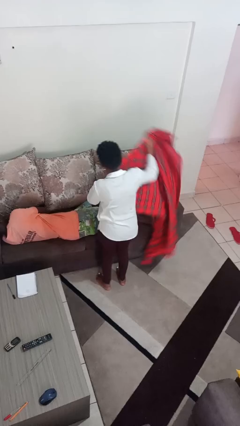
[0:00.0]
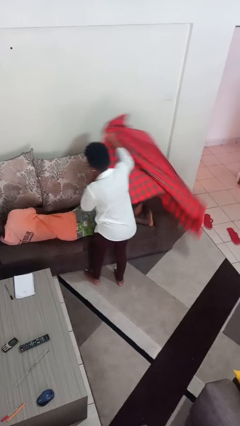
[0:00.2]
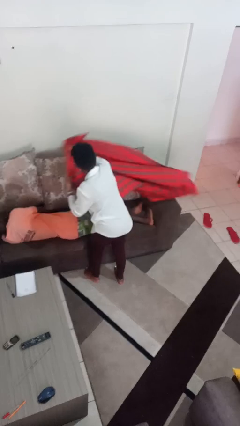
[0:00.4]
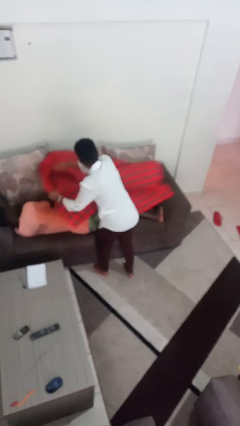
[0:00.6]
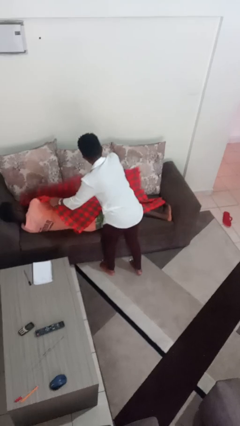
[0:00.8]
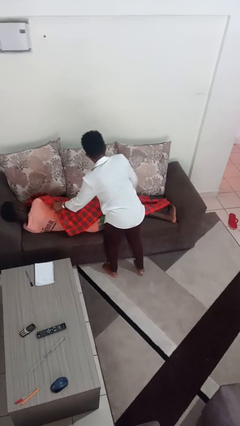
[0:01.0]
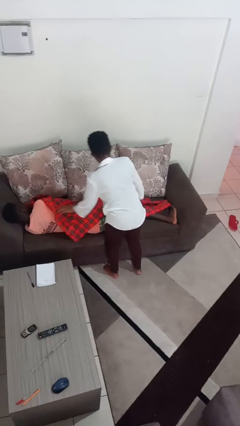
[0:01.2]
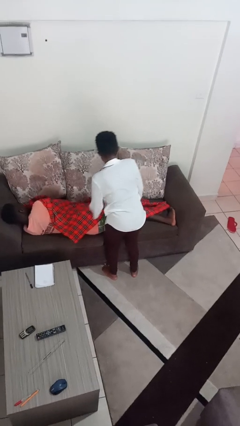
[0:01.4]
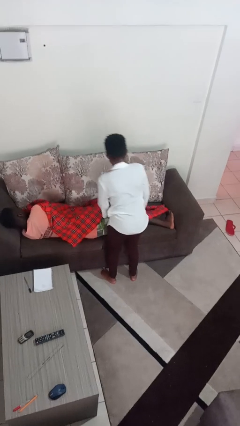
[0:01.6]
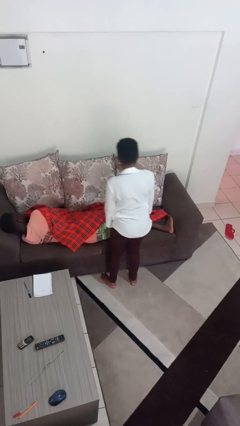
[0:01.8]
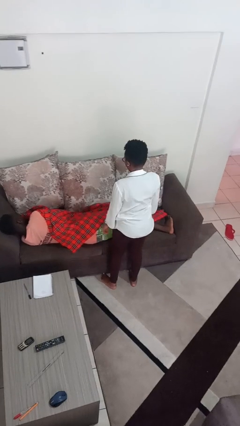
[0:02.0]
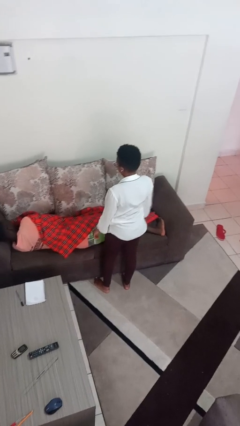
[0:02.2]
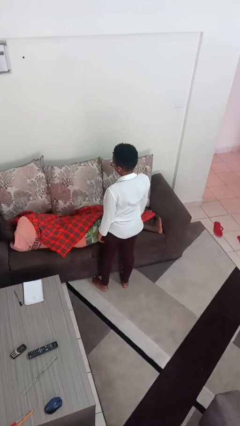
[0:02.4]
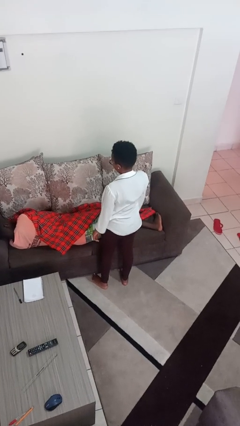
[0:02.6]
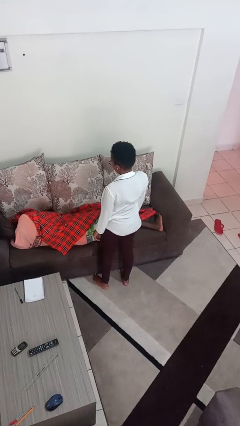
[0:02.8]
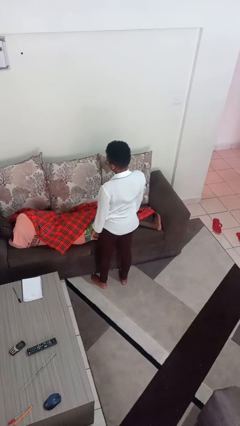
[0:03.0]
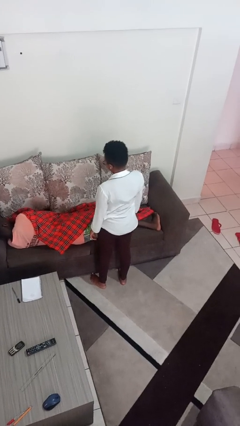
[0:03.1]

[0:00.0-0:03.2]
person covers friend with blanket

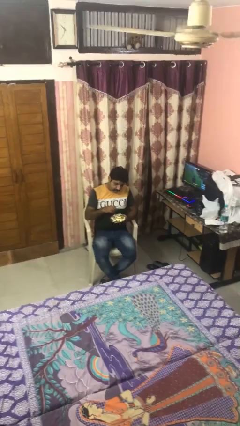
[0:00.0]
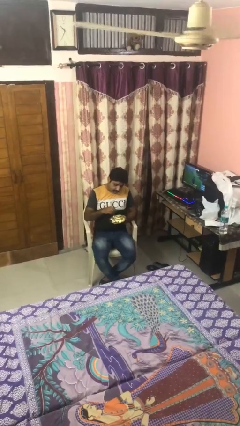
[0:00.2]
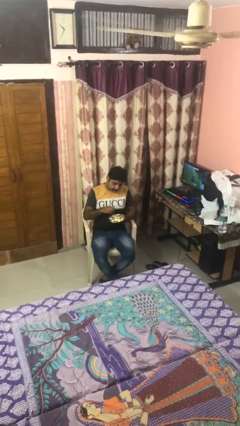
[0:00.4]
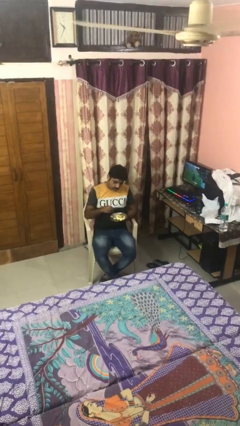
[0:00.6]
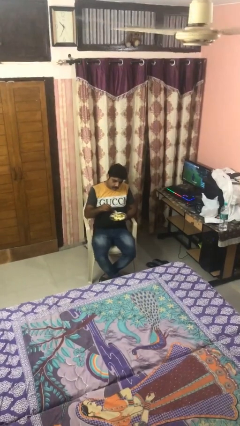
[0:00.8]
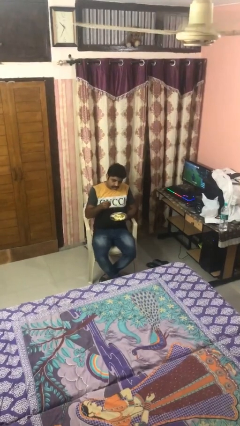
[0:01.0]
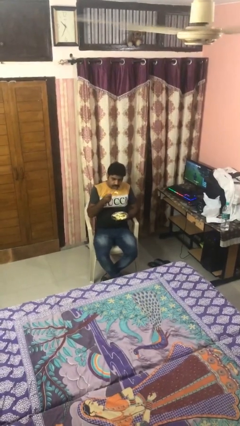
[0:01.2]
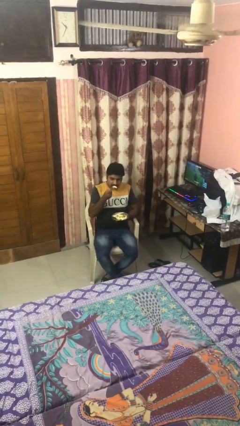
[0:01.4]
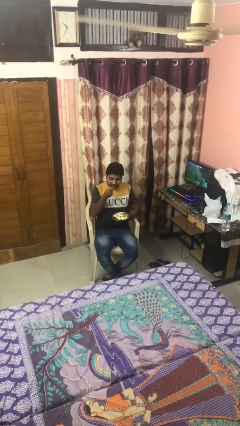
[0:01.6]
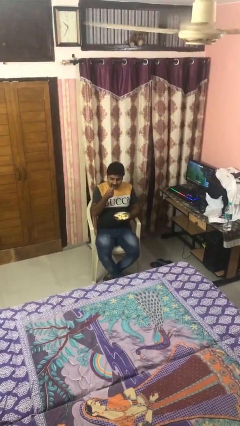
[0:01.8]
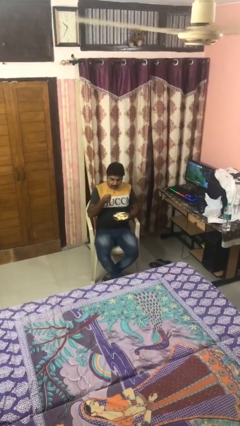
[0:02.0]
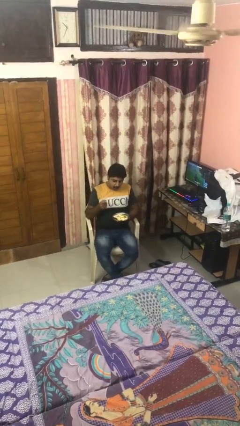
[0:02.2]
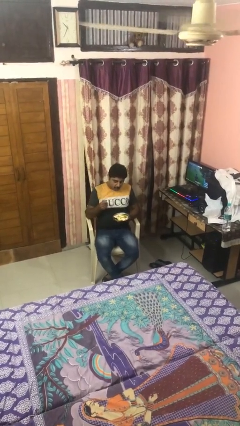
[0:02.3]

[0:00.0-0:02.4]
person eats with utensil

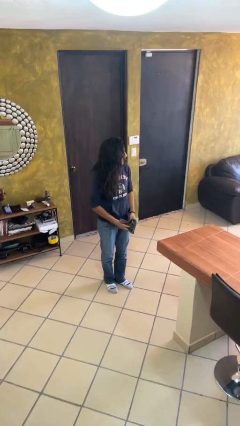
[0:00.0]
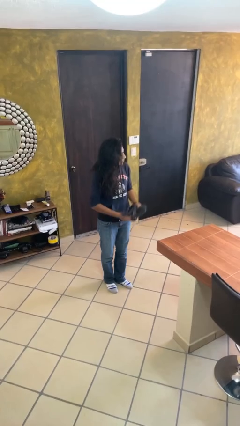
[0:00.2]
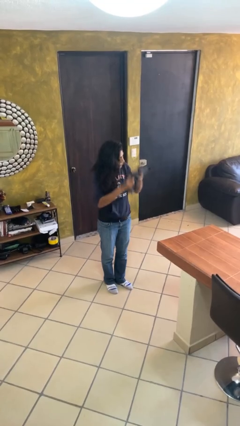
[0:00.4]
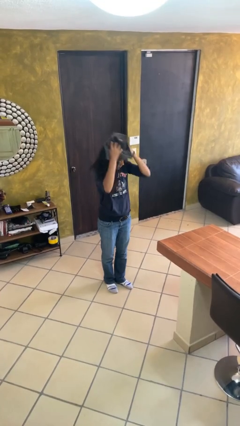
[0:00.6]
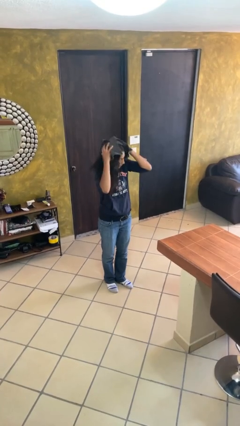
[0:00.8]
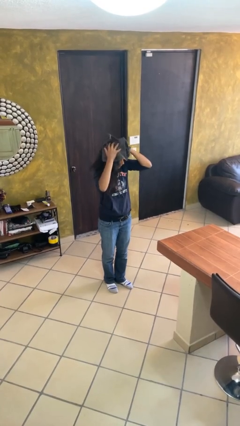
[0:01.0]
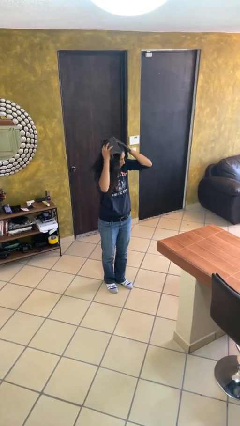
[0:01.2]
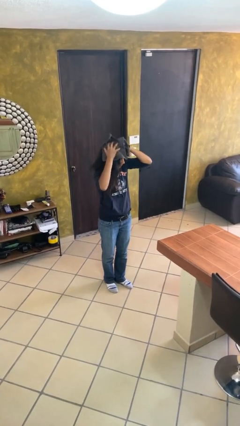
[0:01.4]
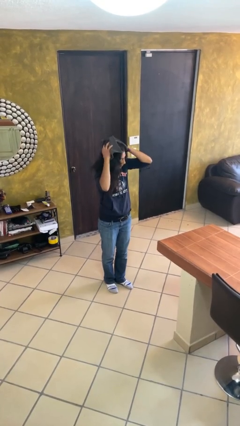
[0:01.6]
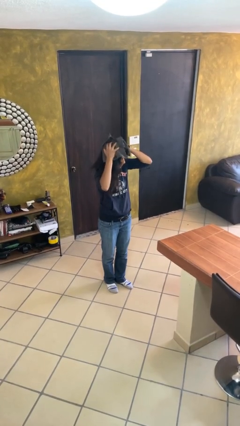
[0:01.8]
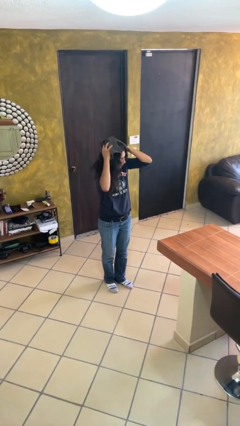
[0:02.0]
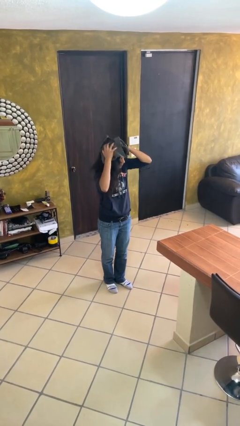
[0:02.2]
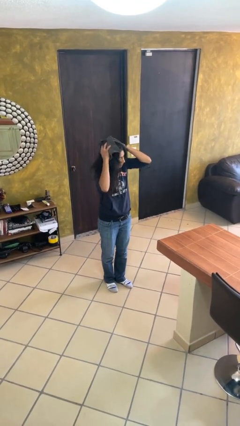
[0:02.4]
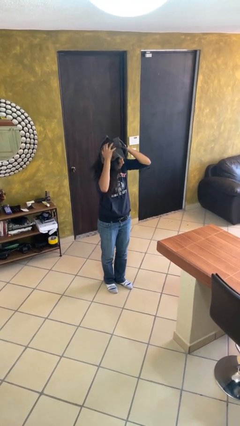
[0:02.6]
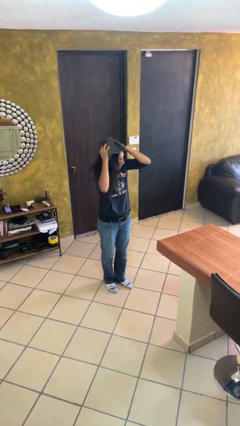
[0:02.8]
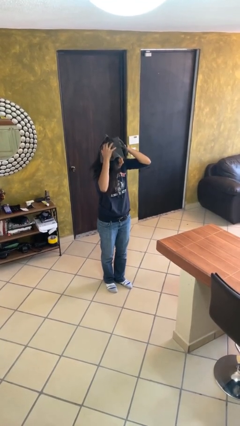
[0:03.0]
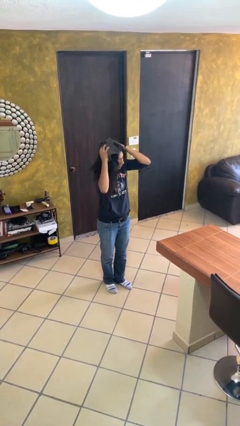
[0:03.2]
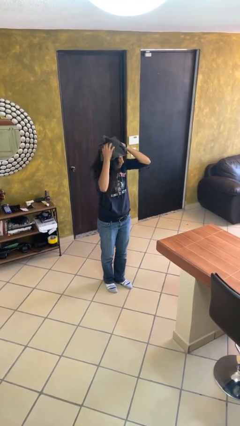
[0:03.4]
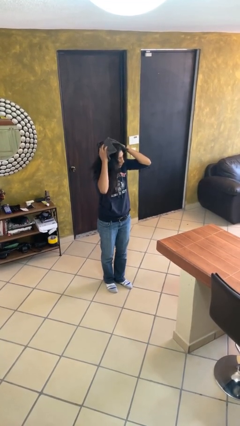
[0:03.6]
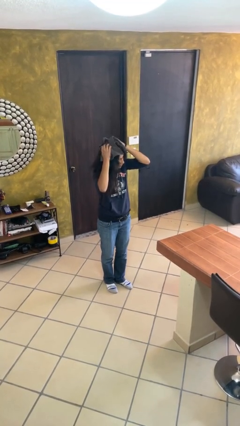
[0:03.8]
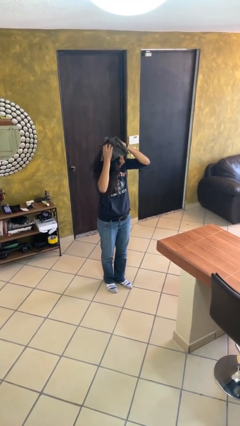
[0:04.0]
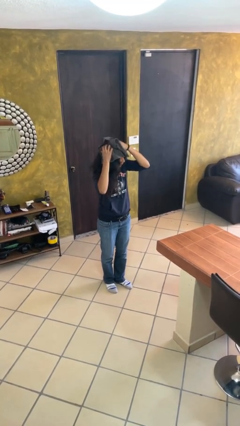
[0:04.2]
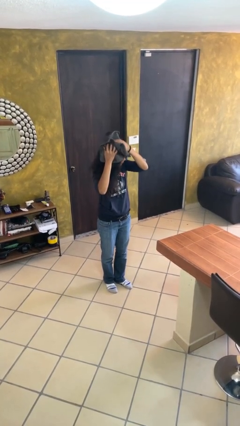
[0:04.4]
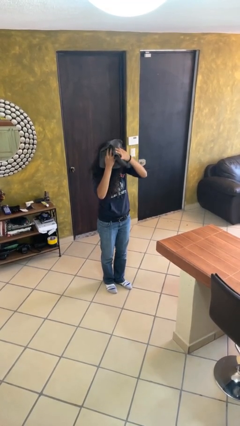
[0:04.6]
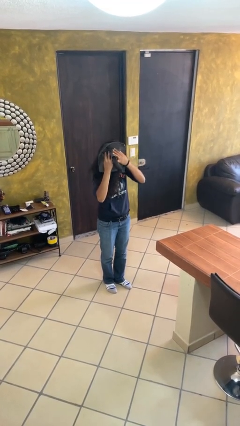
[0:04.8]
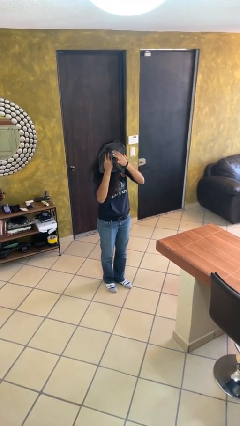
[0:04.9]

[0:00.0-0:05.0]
person dries hair with towel

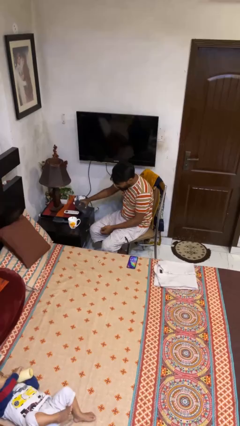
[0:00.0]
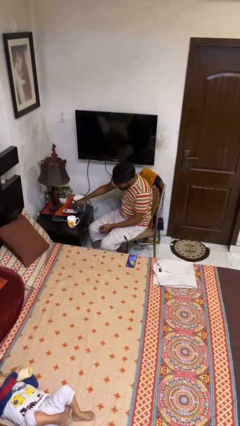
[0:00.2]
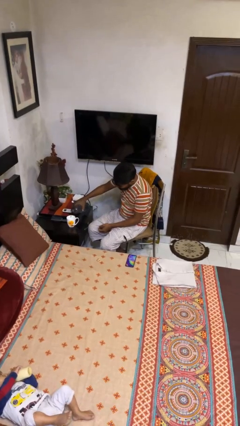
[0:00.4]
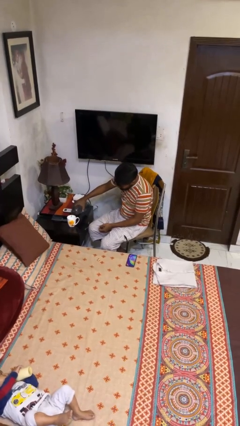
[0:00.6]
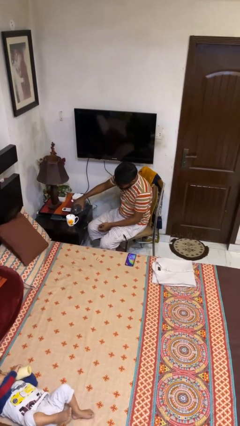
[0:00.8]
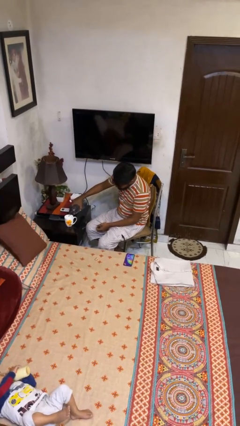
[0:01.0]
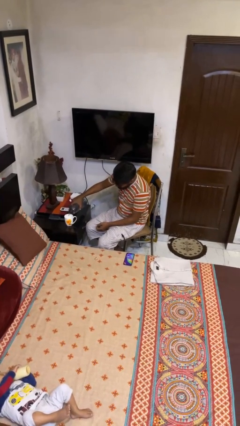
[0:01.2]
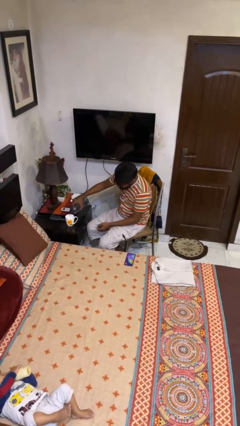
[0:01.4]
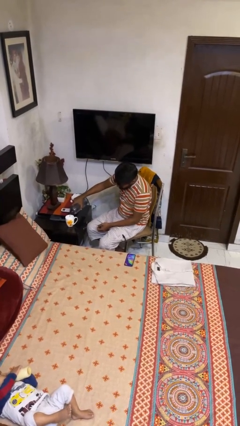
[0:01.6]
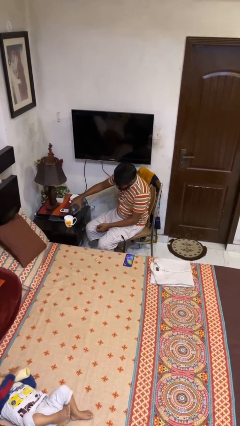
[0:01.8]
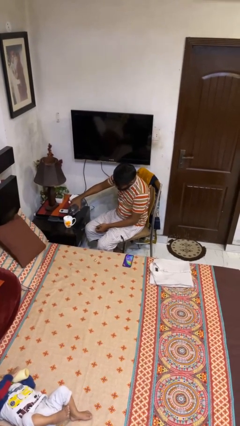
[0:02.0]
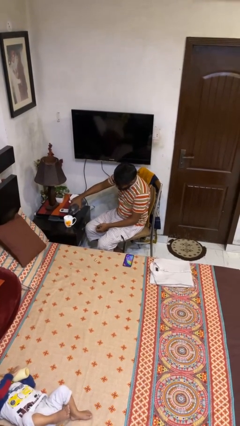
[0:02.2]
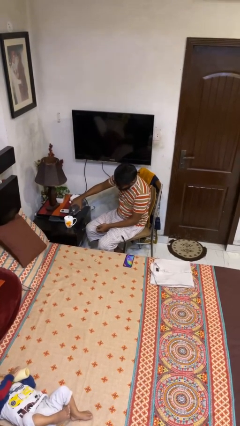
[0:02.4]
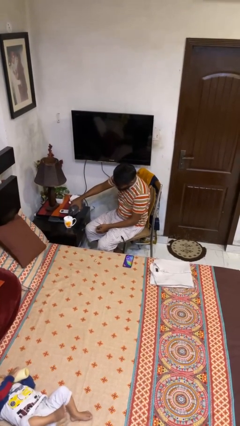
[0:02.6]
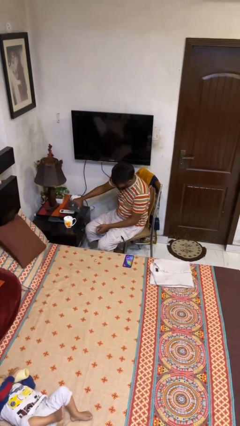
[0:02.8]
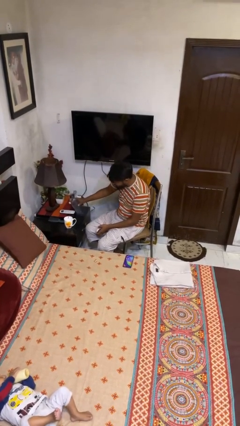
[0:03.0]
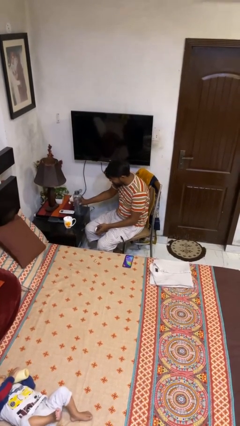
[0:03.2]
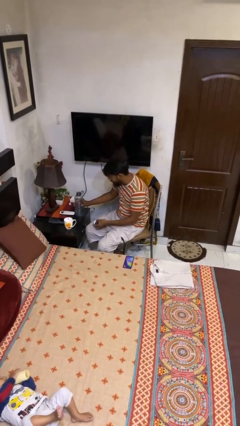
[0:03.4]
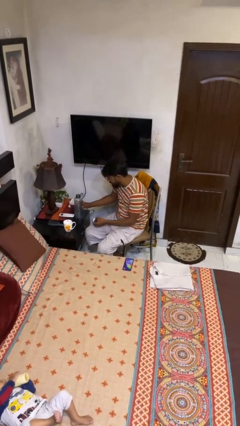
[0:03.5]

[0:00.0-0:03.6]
person pours liquid into cup

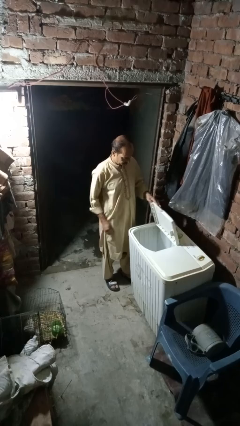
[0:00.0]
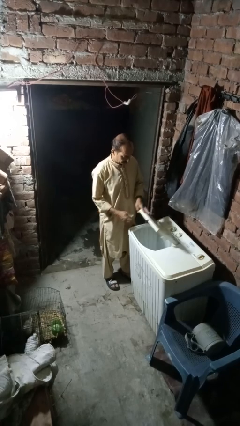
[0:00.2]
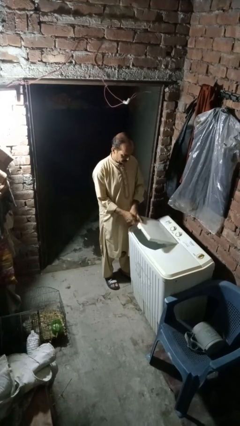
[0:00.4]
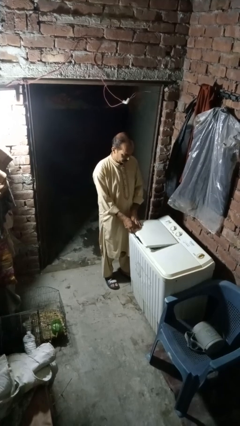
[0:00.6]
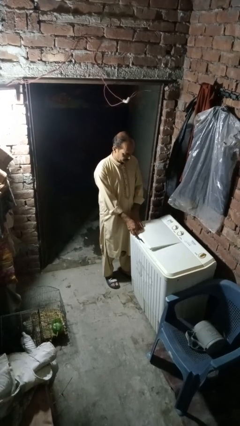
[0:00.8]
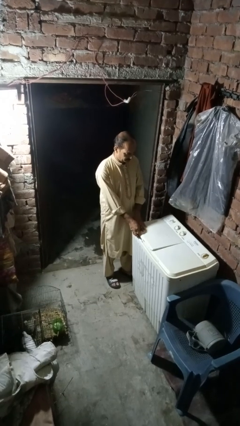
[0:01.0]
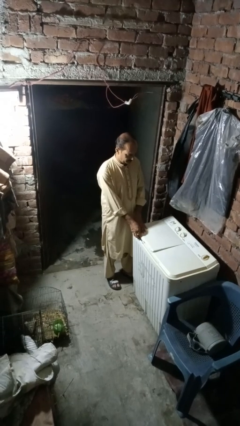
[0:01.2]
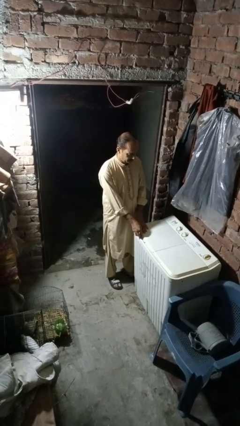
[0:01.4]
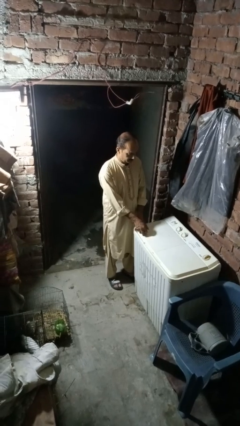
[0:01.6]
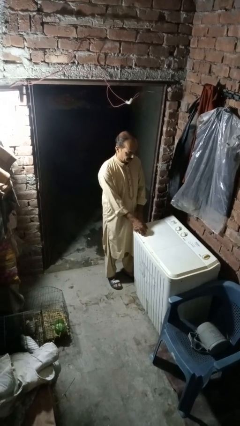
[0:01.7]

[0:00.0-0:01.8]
person closes clothes washer

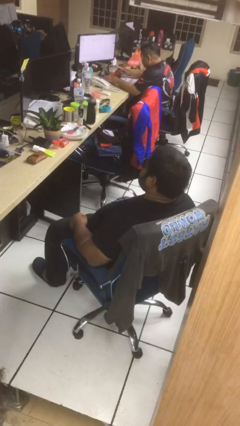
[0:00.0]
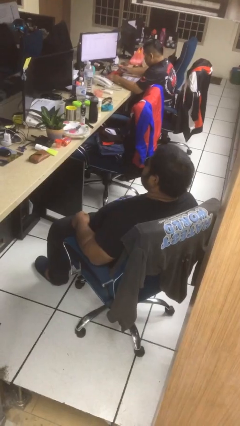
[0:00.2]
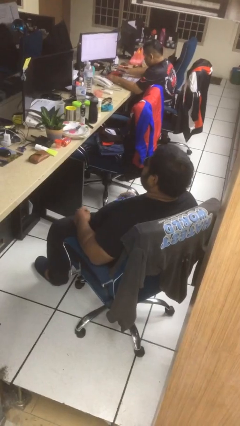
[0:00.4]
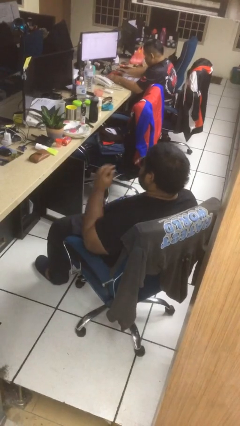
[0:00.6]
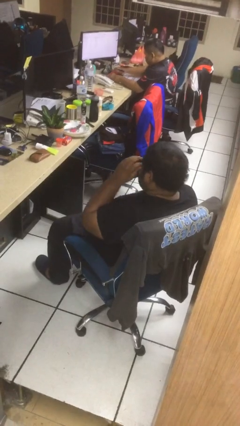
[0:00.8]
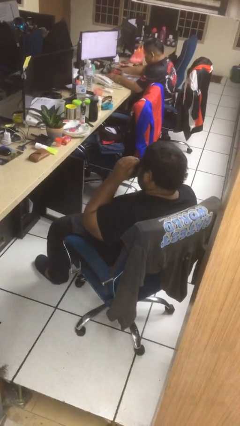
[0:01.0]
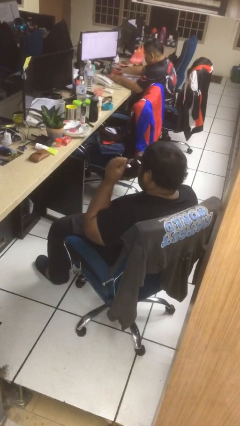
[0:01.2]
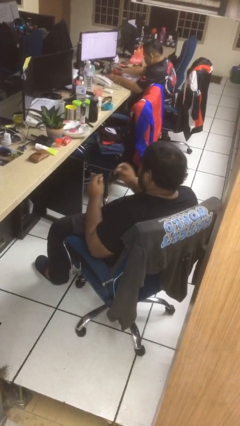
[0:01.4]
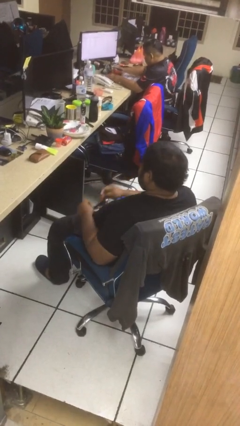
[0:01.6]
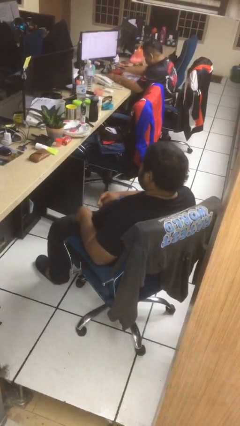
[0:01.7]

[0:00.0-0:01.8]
person takes off sunglasses
